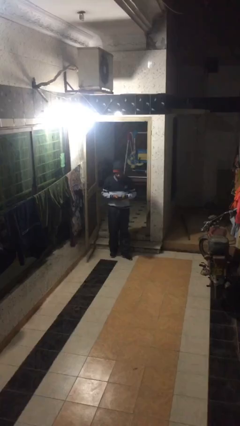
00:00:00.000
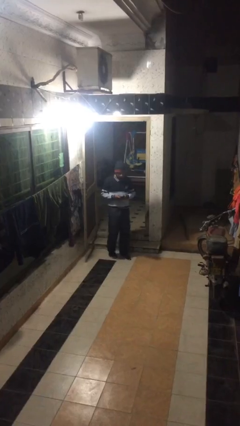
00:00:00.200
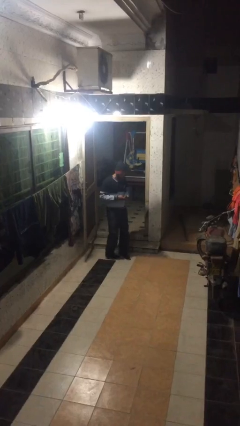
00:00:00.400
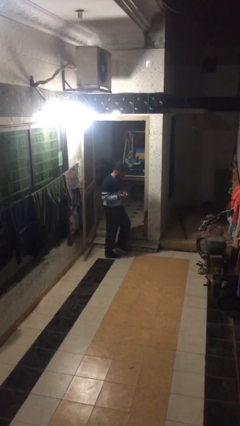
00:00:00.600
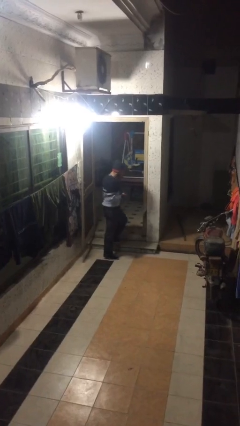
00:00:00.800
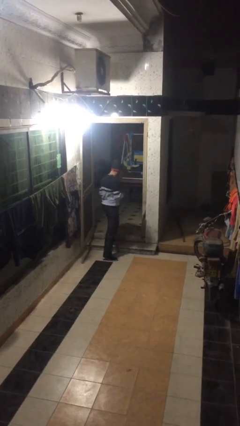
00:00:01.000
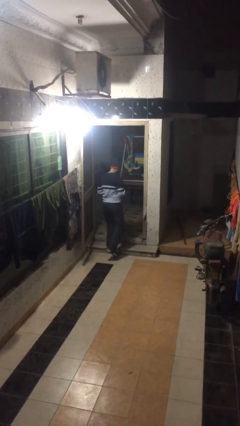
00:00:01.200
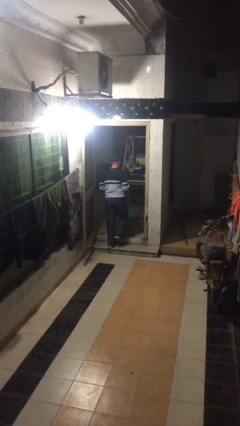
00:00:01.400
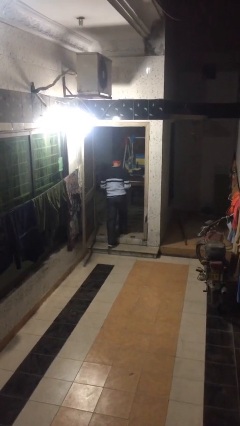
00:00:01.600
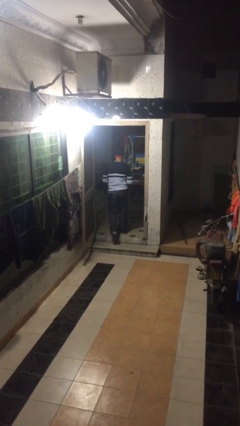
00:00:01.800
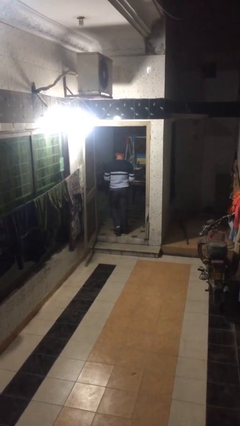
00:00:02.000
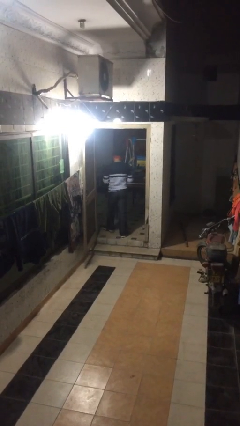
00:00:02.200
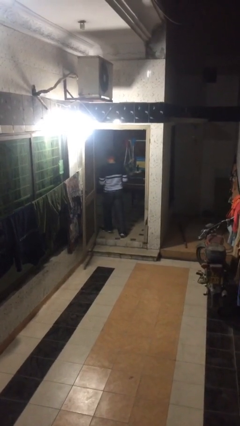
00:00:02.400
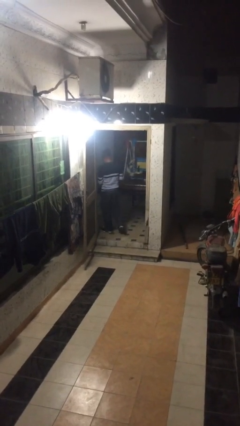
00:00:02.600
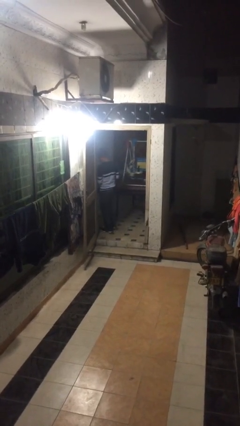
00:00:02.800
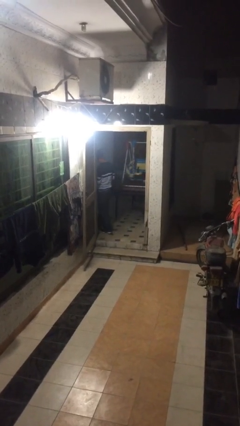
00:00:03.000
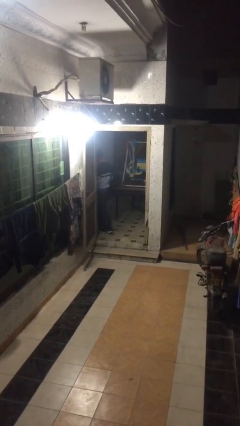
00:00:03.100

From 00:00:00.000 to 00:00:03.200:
person exits scene through structure

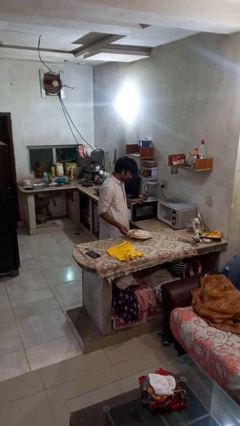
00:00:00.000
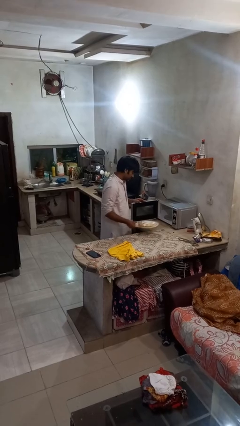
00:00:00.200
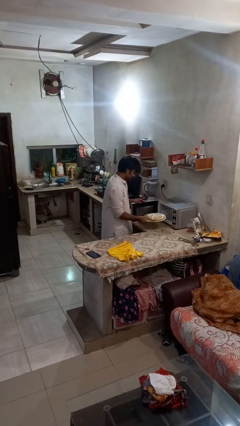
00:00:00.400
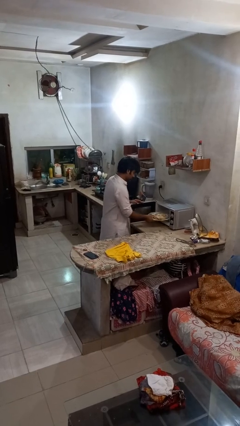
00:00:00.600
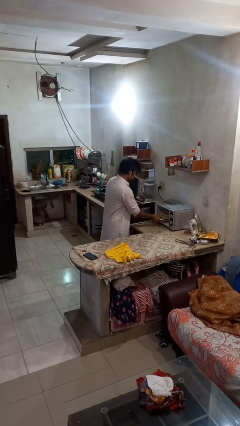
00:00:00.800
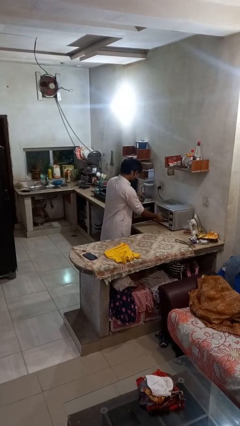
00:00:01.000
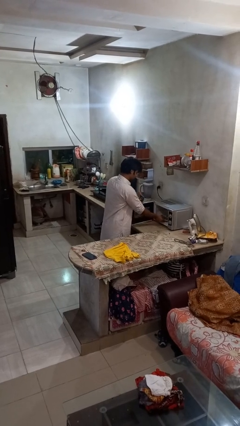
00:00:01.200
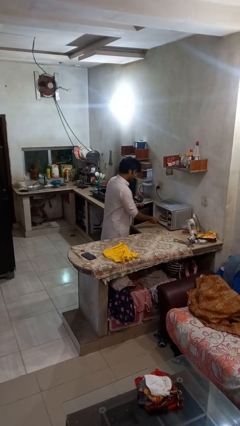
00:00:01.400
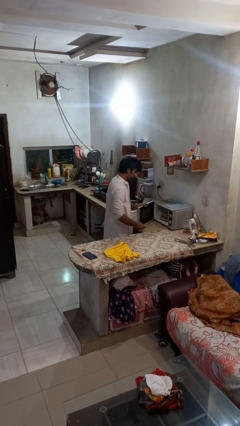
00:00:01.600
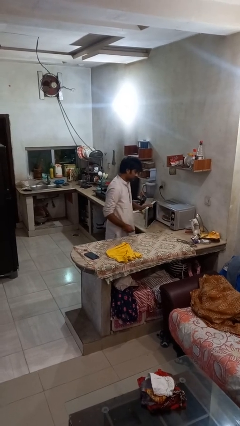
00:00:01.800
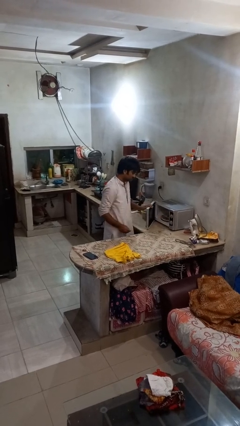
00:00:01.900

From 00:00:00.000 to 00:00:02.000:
person puts object into microwave

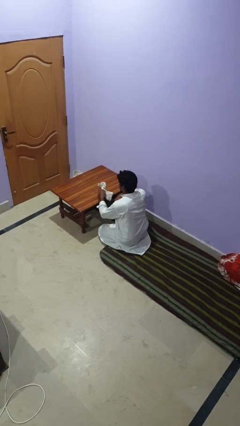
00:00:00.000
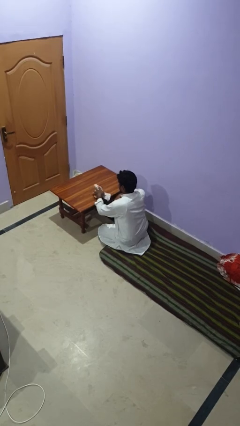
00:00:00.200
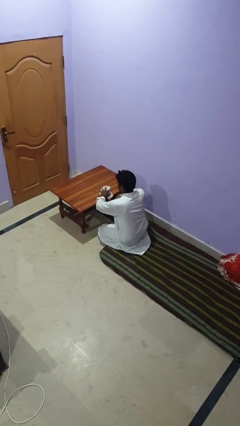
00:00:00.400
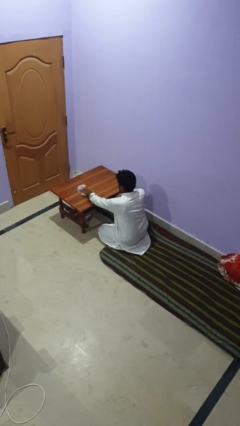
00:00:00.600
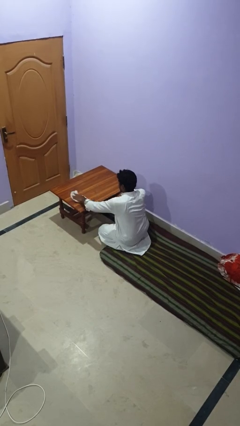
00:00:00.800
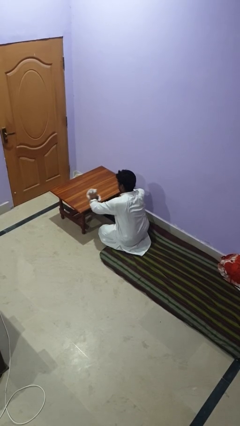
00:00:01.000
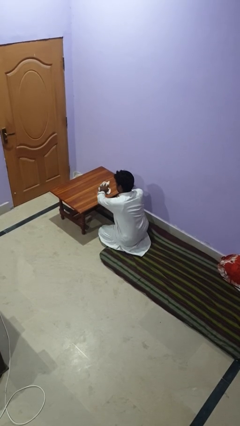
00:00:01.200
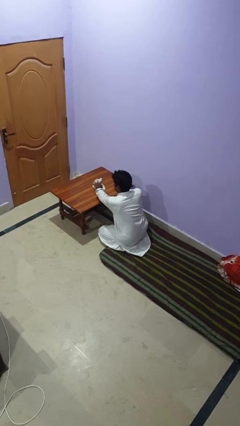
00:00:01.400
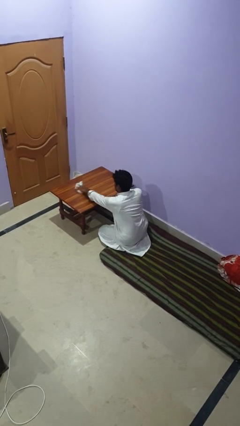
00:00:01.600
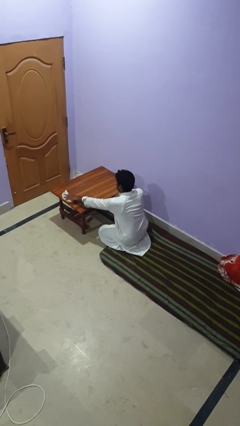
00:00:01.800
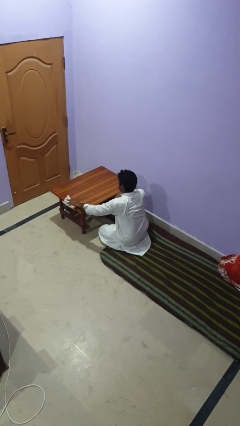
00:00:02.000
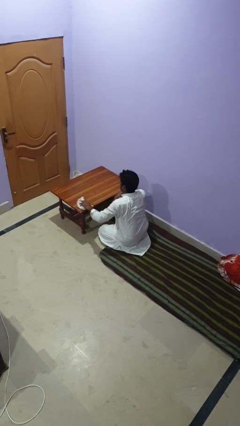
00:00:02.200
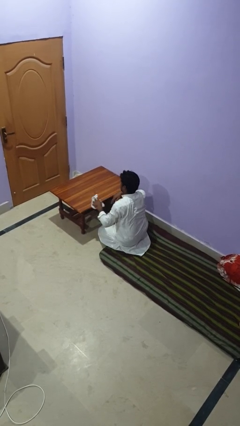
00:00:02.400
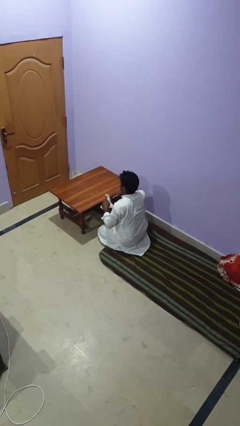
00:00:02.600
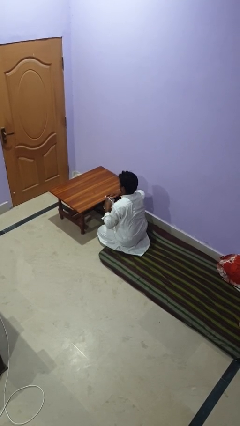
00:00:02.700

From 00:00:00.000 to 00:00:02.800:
person cleans table with rag

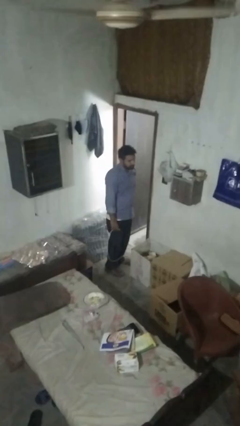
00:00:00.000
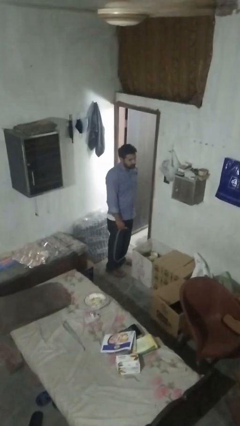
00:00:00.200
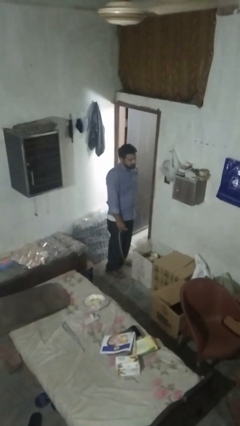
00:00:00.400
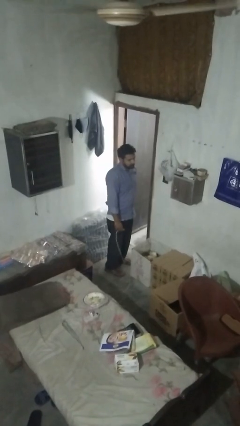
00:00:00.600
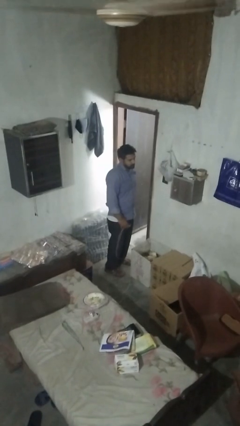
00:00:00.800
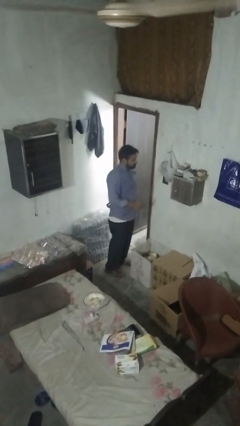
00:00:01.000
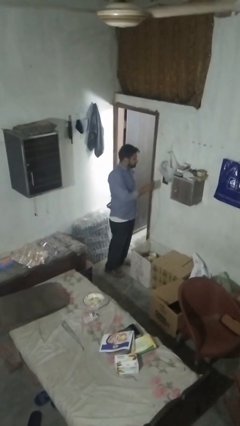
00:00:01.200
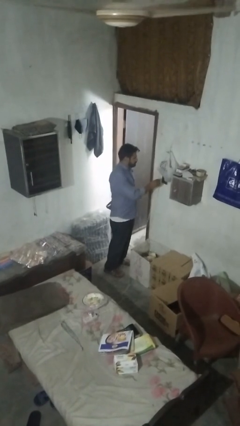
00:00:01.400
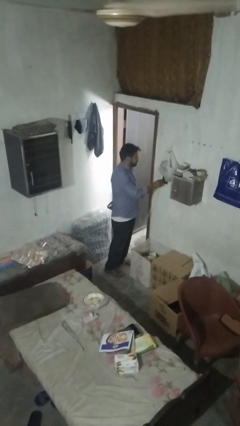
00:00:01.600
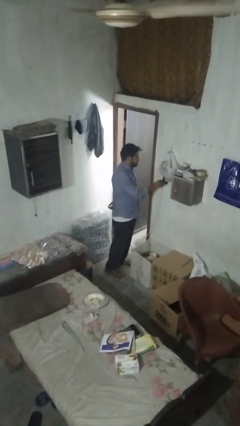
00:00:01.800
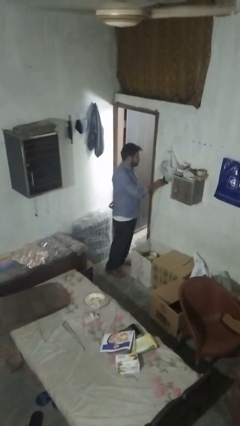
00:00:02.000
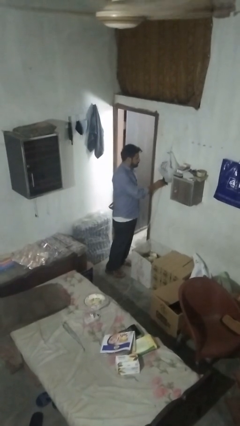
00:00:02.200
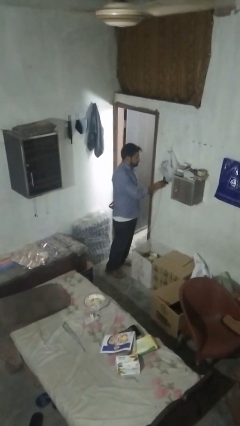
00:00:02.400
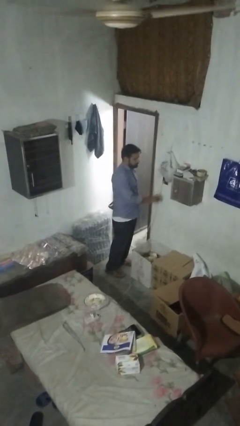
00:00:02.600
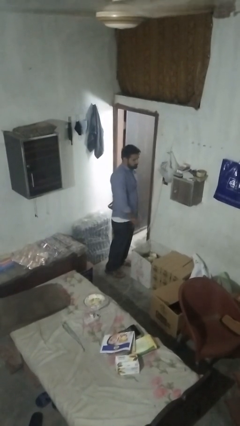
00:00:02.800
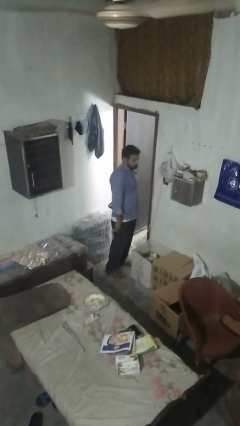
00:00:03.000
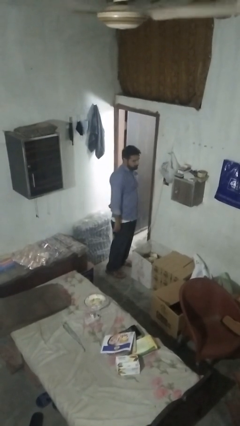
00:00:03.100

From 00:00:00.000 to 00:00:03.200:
person plugs into electrical socket

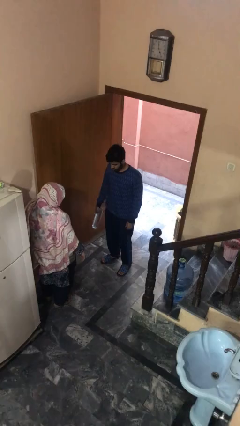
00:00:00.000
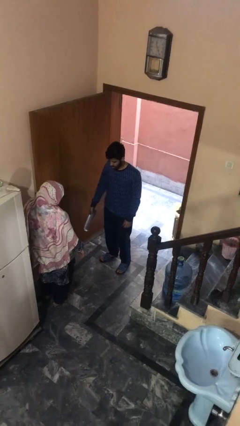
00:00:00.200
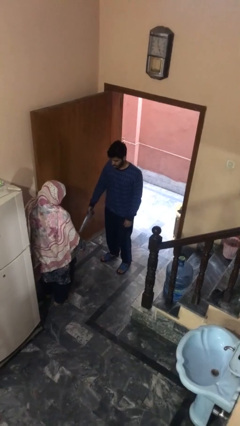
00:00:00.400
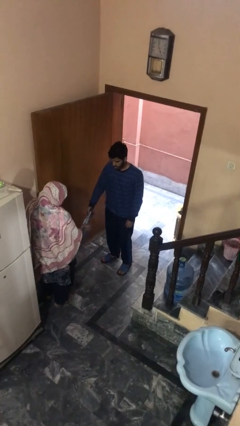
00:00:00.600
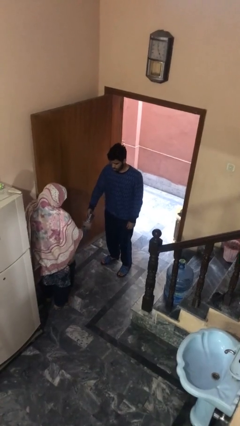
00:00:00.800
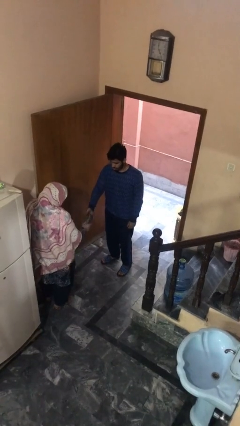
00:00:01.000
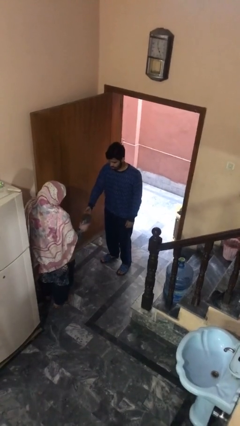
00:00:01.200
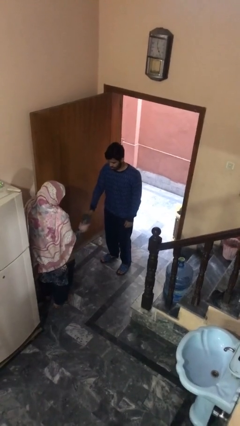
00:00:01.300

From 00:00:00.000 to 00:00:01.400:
person transfers object to person

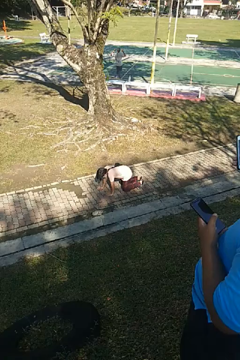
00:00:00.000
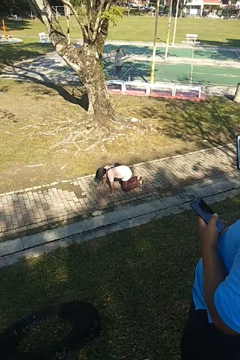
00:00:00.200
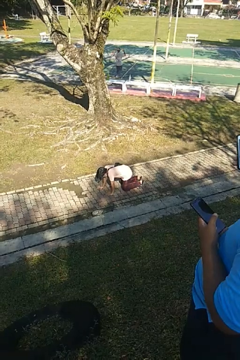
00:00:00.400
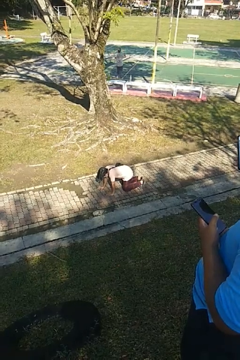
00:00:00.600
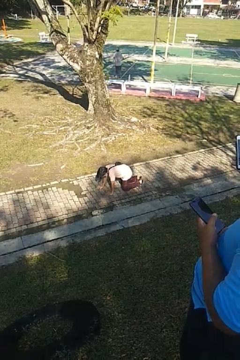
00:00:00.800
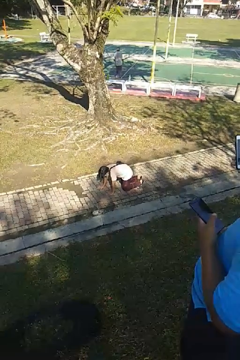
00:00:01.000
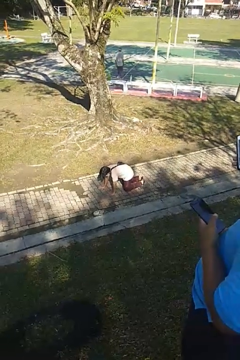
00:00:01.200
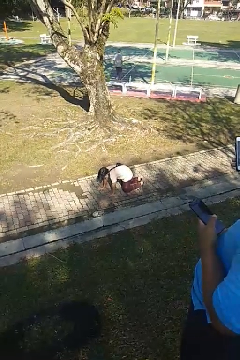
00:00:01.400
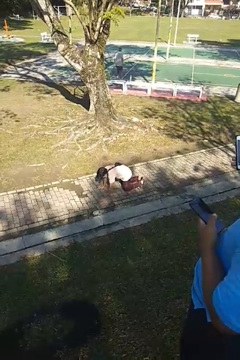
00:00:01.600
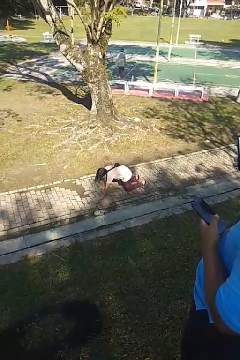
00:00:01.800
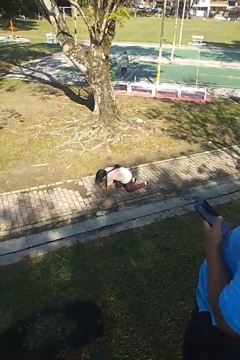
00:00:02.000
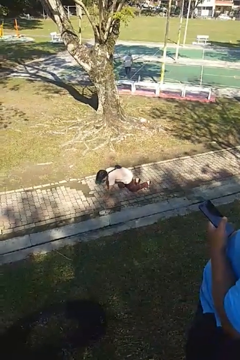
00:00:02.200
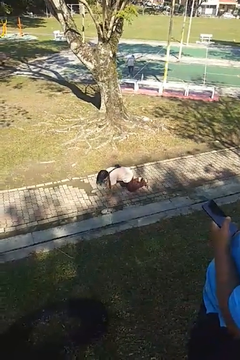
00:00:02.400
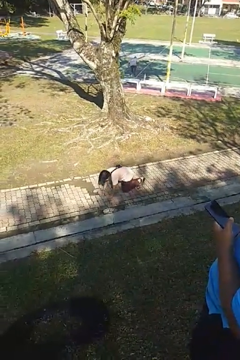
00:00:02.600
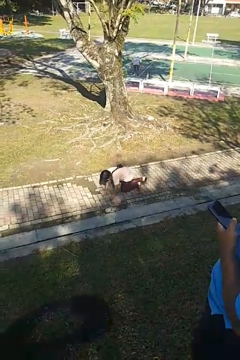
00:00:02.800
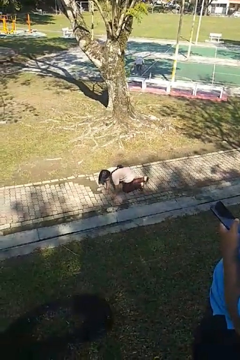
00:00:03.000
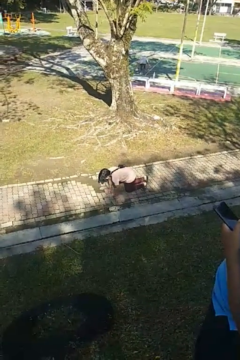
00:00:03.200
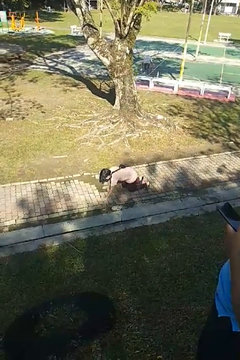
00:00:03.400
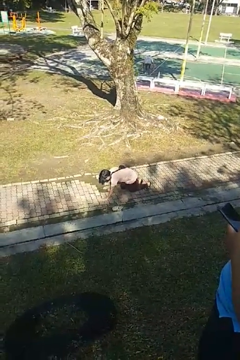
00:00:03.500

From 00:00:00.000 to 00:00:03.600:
person crawls

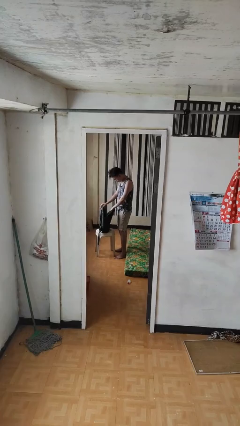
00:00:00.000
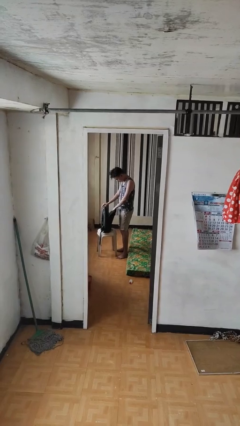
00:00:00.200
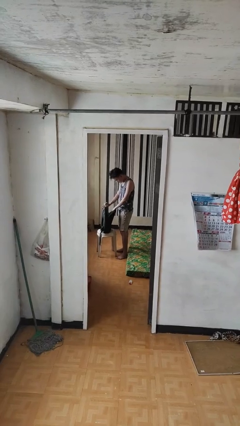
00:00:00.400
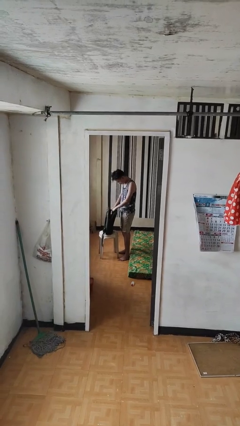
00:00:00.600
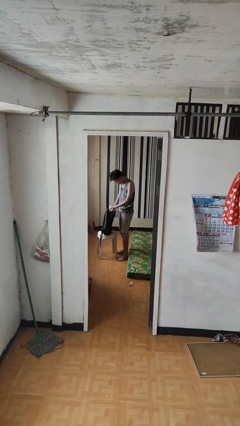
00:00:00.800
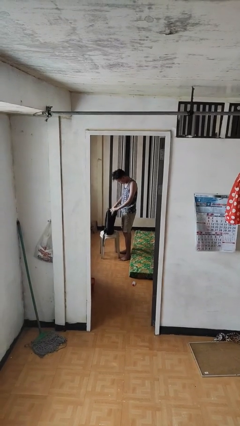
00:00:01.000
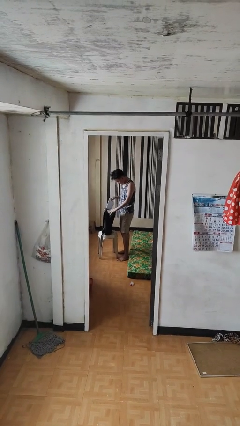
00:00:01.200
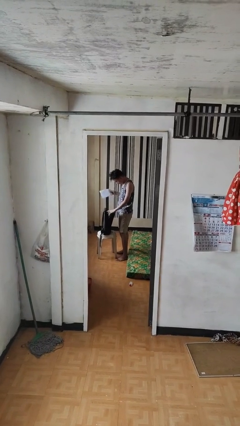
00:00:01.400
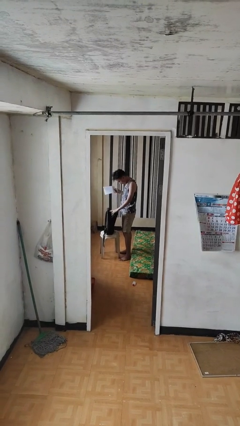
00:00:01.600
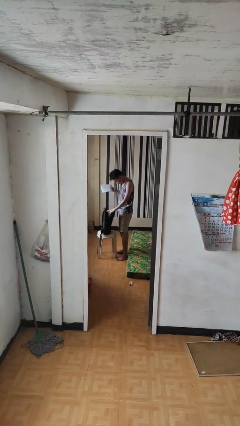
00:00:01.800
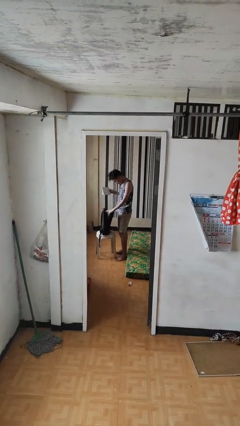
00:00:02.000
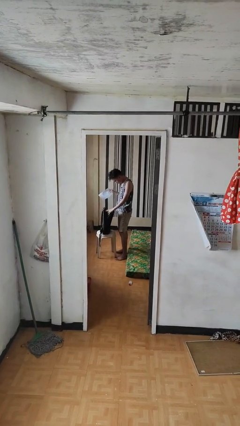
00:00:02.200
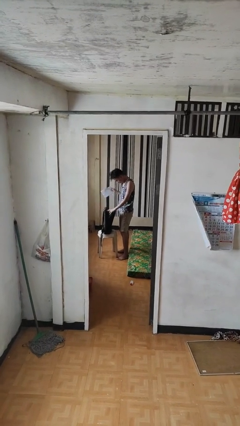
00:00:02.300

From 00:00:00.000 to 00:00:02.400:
person takes object from backpack
